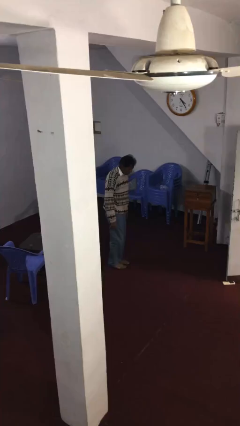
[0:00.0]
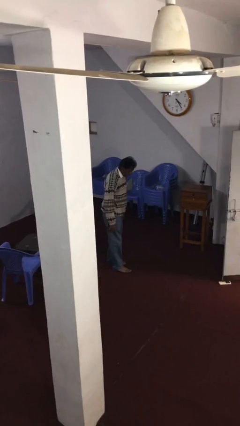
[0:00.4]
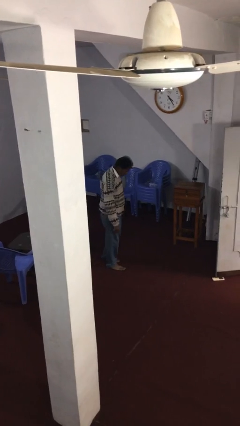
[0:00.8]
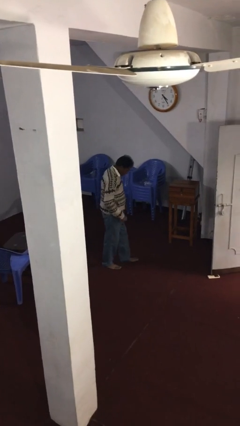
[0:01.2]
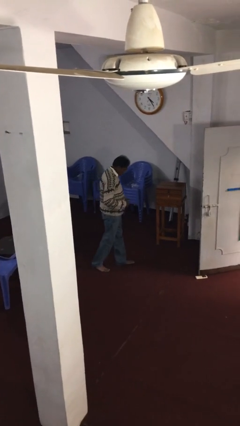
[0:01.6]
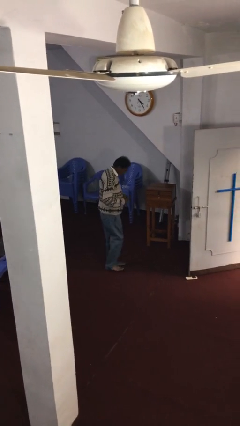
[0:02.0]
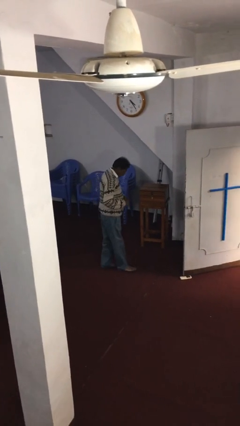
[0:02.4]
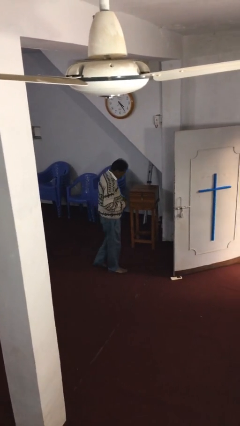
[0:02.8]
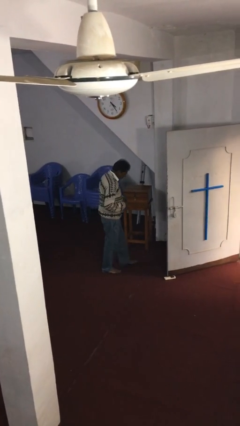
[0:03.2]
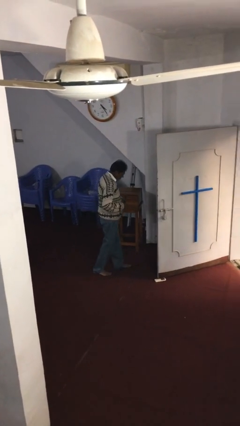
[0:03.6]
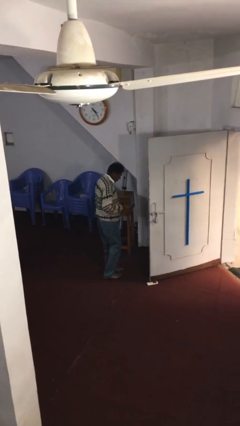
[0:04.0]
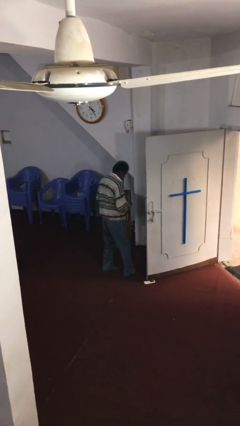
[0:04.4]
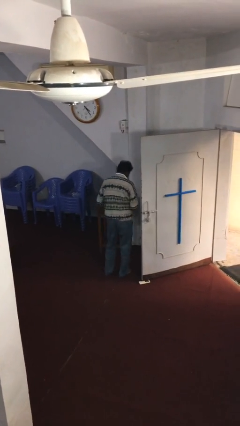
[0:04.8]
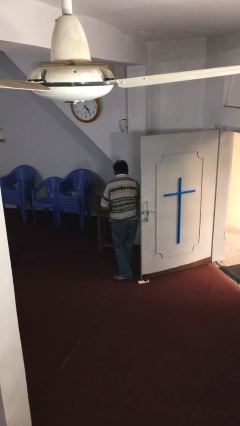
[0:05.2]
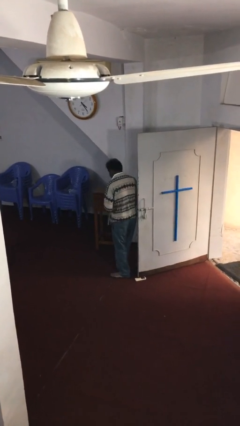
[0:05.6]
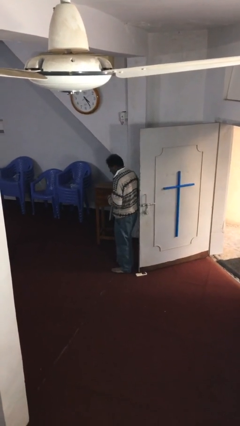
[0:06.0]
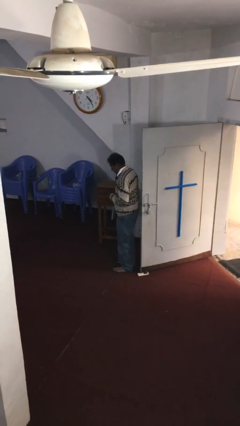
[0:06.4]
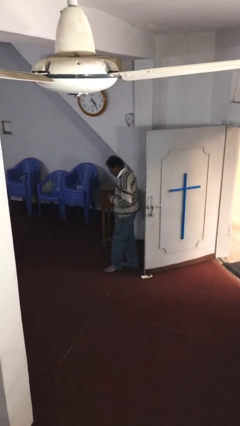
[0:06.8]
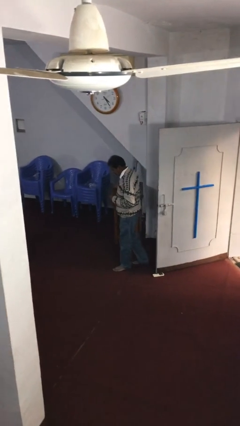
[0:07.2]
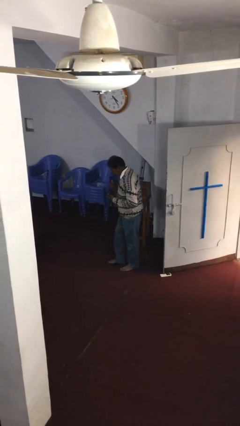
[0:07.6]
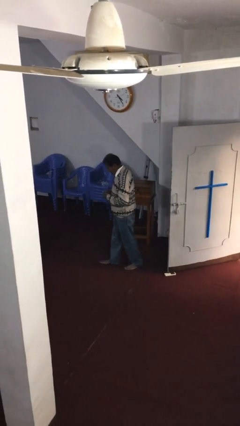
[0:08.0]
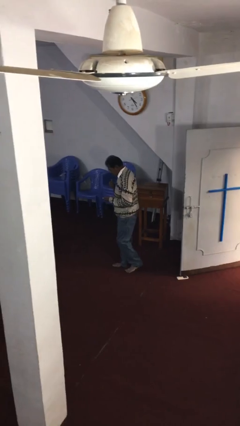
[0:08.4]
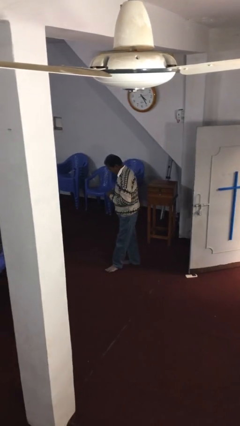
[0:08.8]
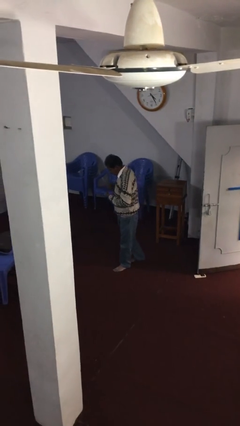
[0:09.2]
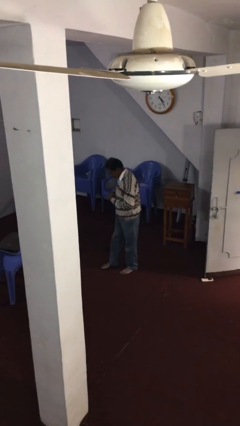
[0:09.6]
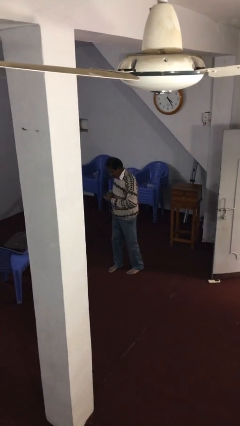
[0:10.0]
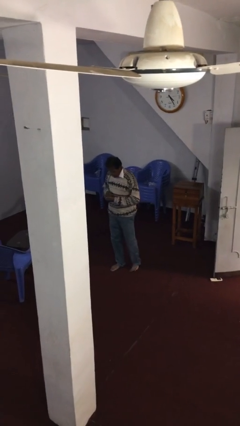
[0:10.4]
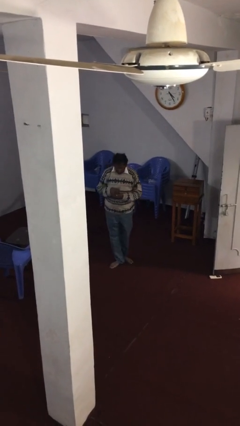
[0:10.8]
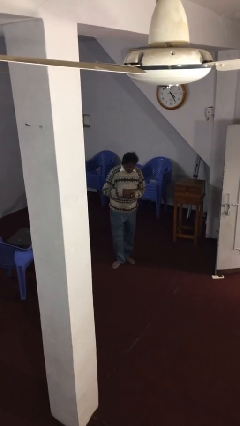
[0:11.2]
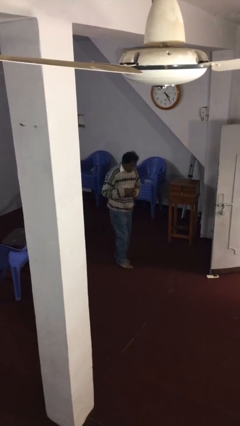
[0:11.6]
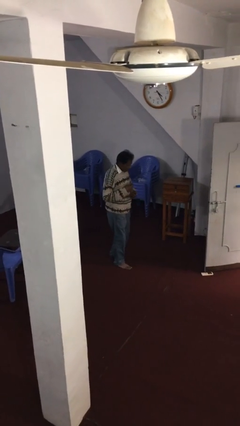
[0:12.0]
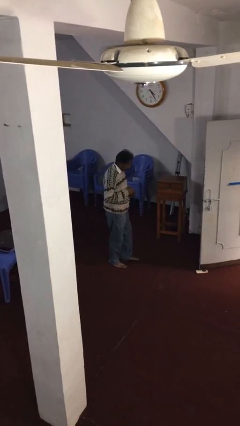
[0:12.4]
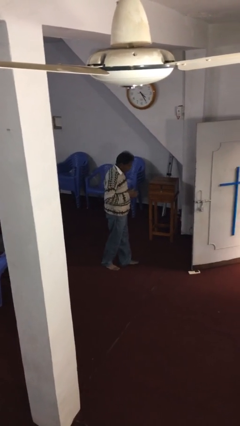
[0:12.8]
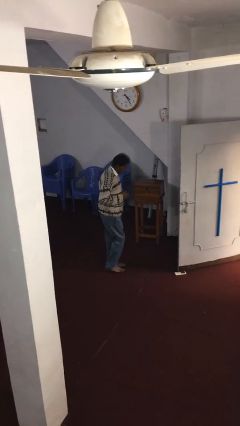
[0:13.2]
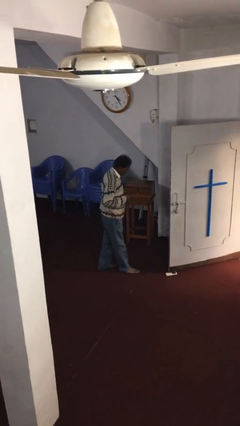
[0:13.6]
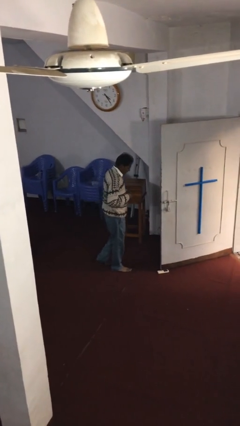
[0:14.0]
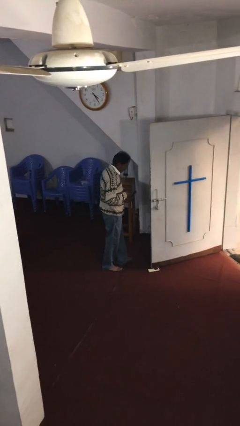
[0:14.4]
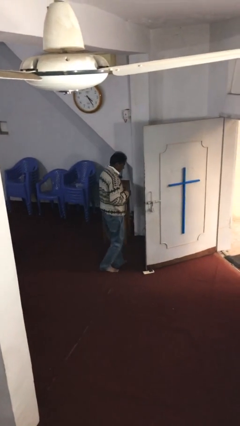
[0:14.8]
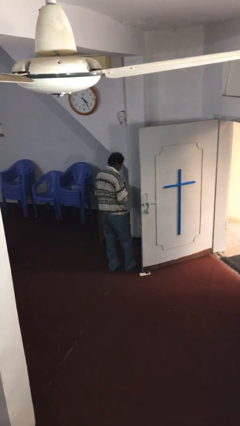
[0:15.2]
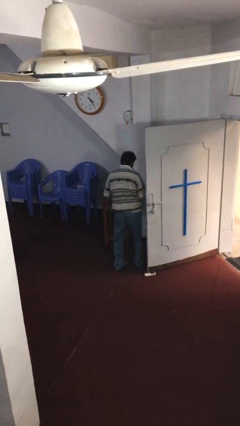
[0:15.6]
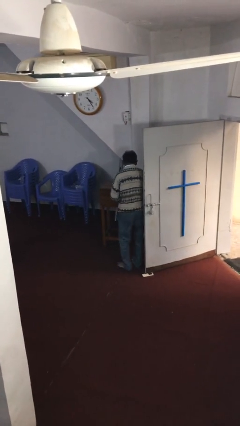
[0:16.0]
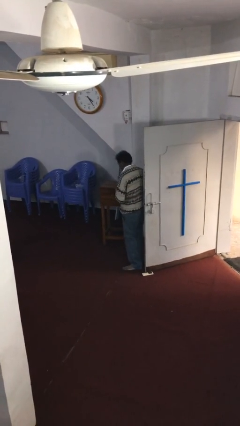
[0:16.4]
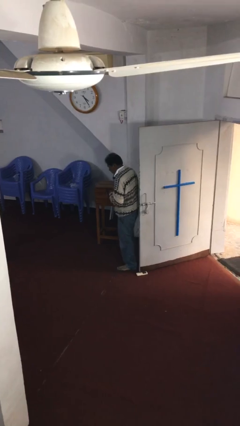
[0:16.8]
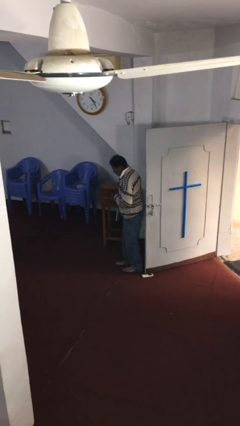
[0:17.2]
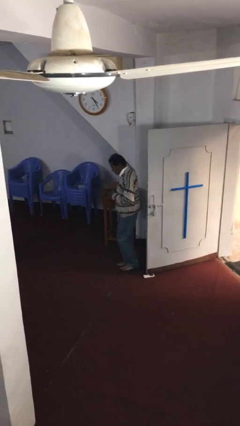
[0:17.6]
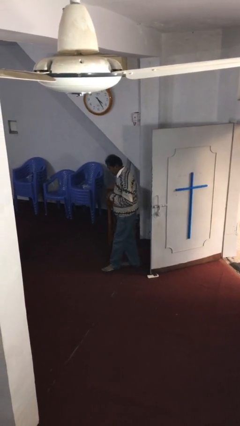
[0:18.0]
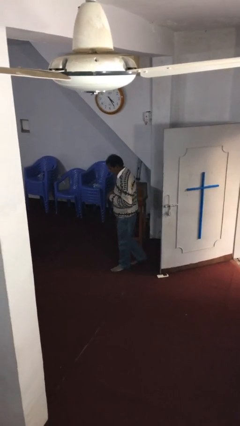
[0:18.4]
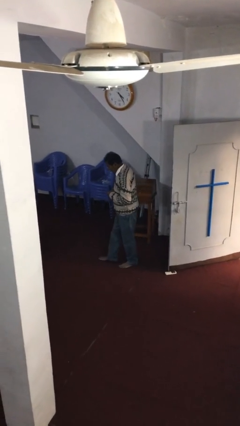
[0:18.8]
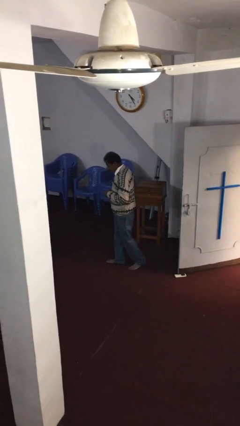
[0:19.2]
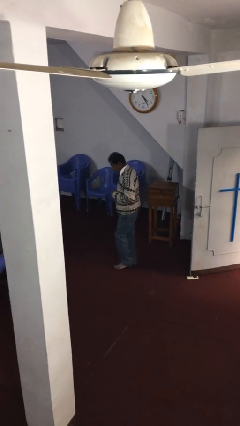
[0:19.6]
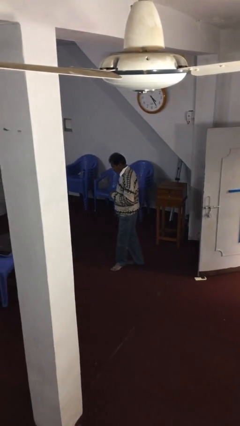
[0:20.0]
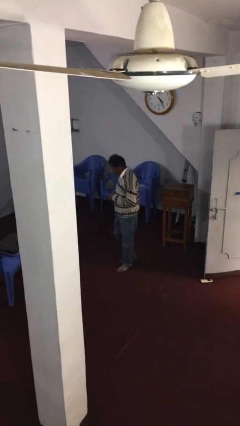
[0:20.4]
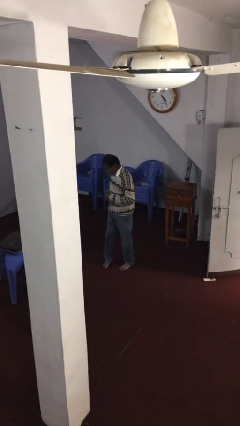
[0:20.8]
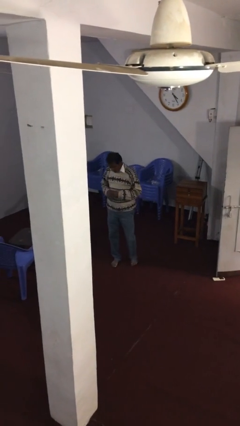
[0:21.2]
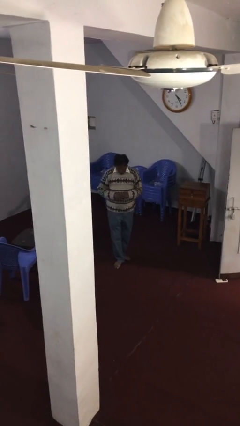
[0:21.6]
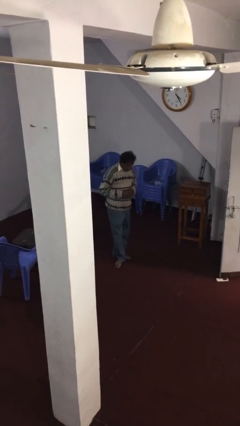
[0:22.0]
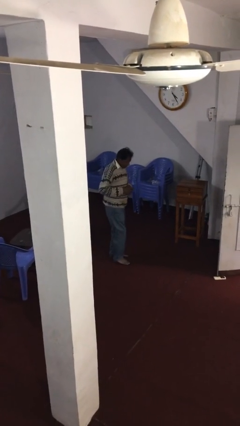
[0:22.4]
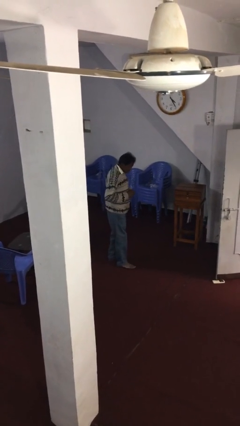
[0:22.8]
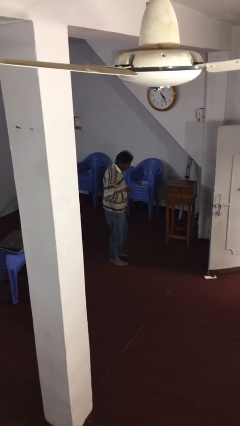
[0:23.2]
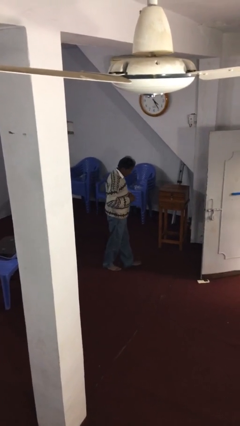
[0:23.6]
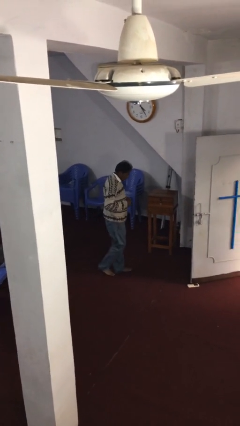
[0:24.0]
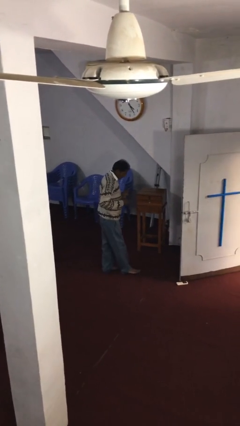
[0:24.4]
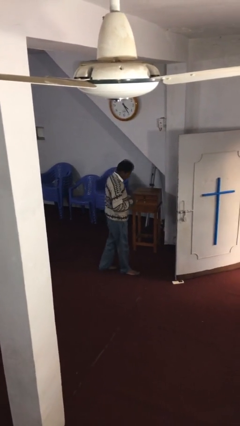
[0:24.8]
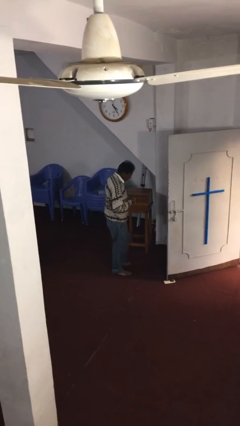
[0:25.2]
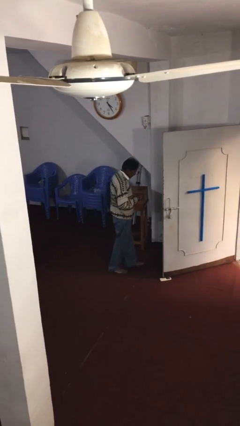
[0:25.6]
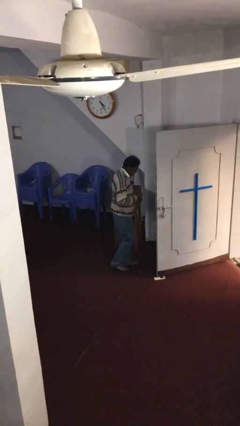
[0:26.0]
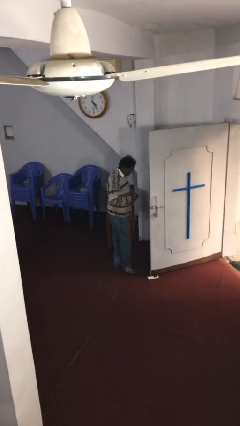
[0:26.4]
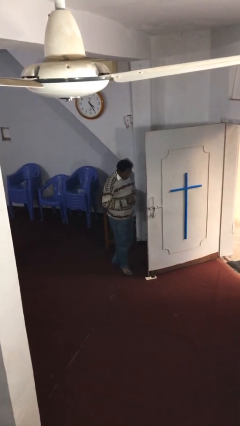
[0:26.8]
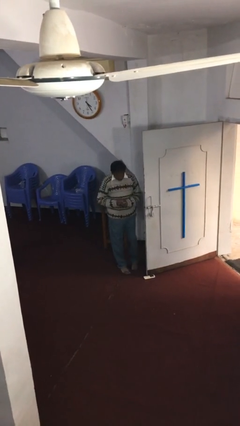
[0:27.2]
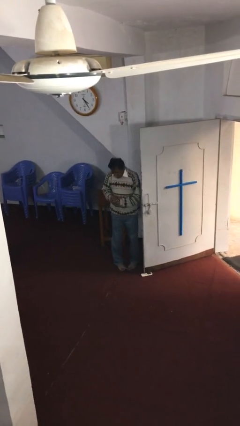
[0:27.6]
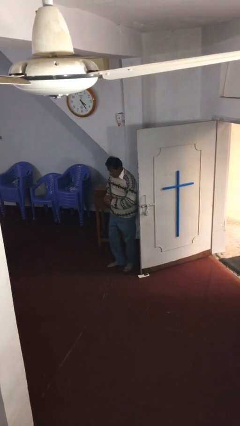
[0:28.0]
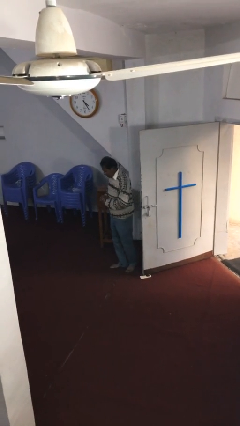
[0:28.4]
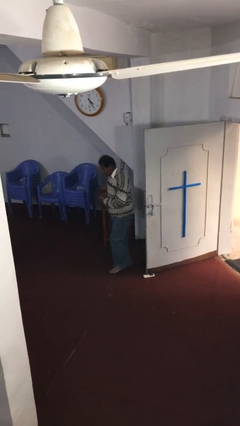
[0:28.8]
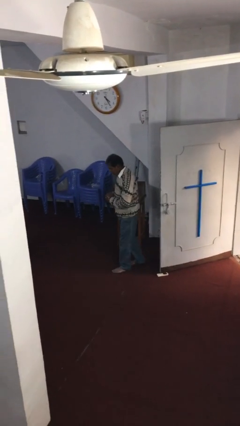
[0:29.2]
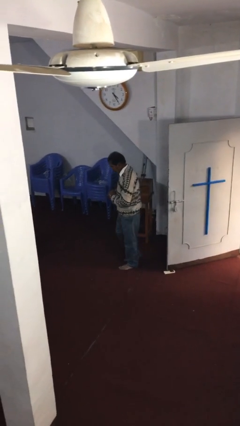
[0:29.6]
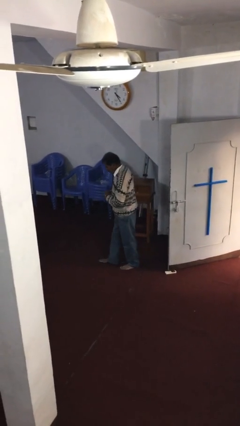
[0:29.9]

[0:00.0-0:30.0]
person walks

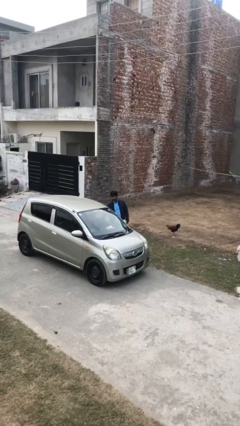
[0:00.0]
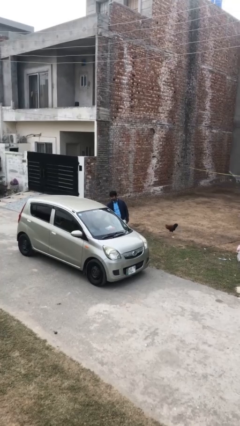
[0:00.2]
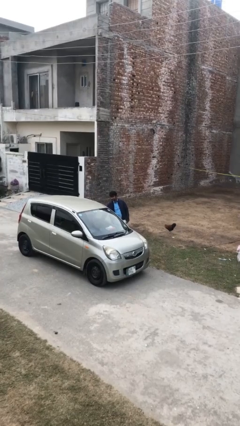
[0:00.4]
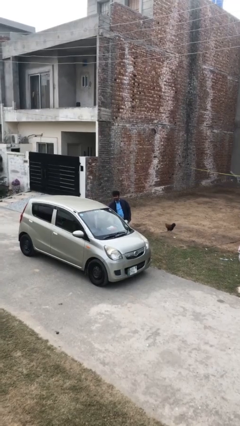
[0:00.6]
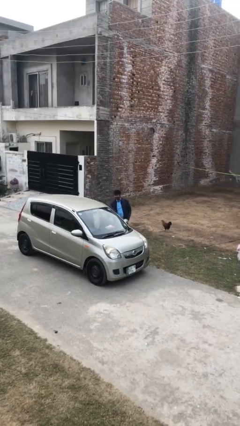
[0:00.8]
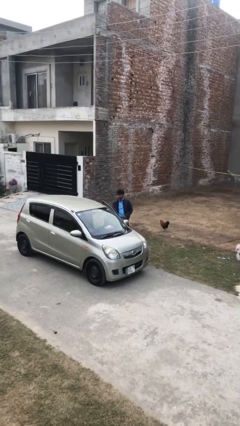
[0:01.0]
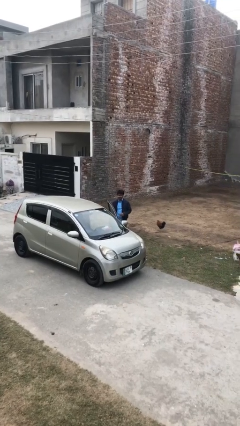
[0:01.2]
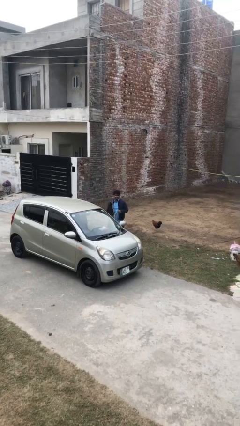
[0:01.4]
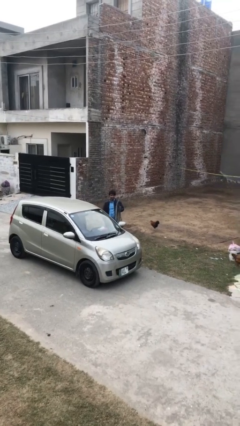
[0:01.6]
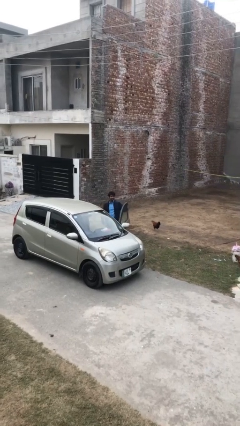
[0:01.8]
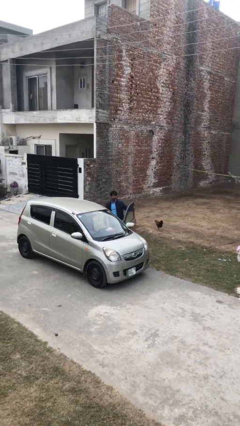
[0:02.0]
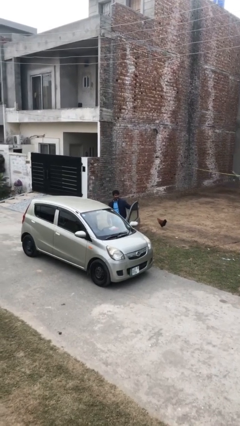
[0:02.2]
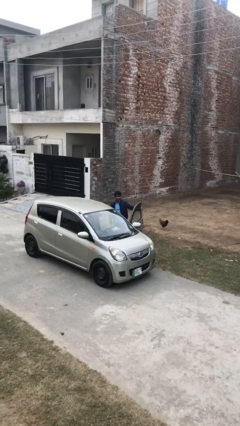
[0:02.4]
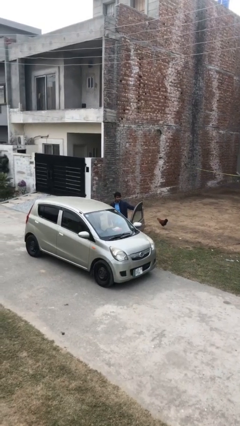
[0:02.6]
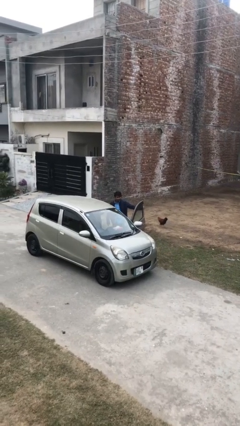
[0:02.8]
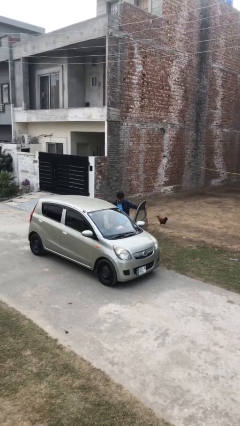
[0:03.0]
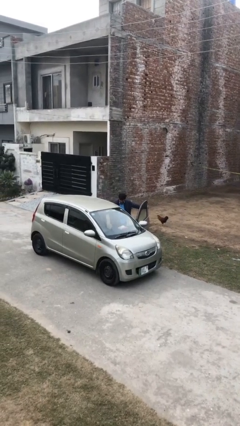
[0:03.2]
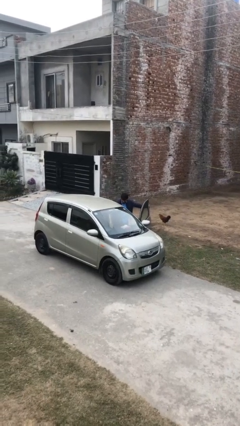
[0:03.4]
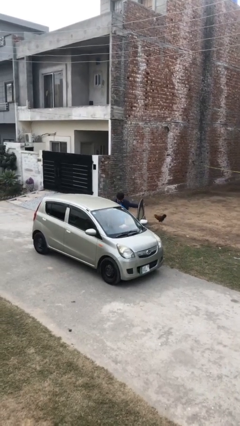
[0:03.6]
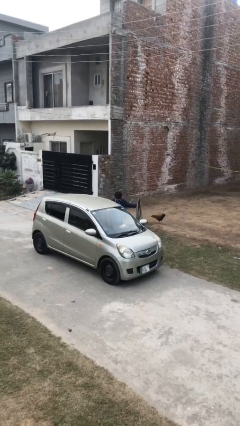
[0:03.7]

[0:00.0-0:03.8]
person opens car door
